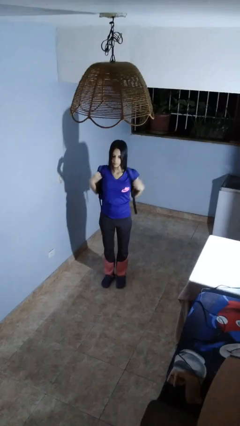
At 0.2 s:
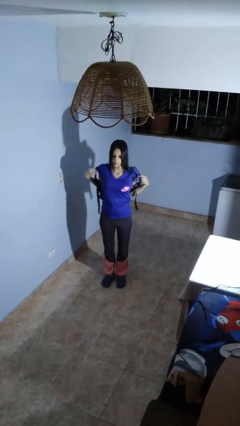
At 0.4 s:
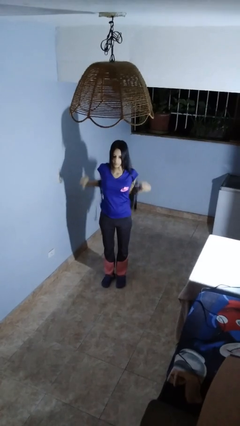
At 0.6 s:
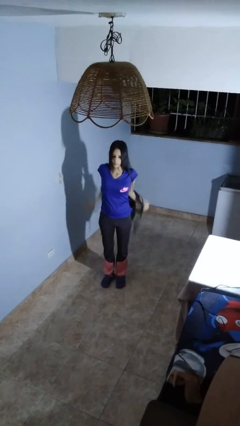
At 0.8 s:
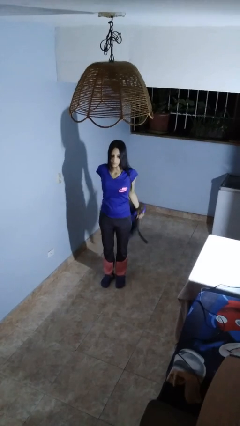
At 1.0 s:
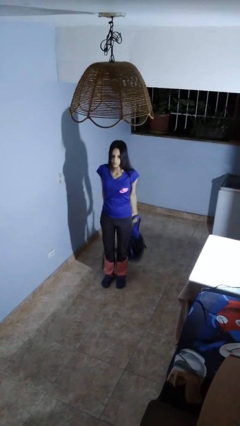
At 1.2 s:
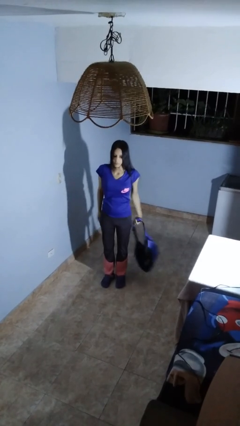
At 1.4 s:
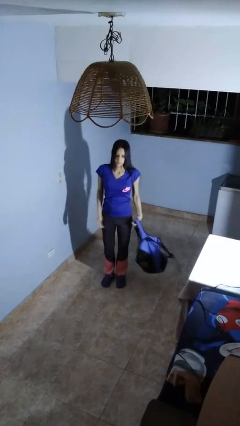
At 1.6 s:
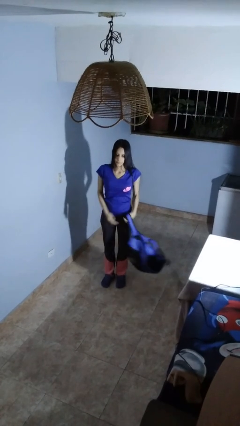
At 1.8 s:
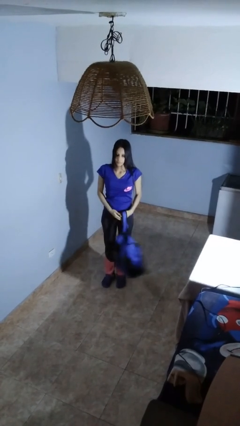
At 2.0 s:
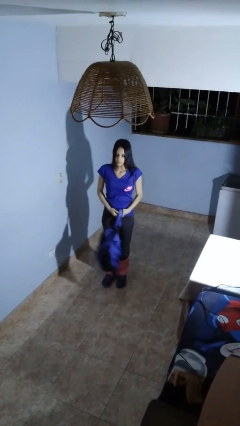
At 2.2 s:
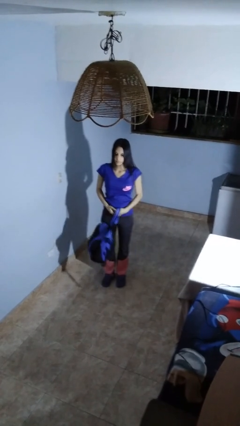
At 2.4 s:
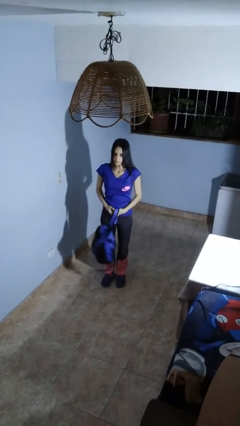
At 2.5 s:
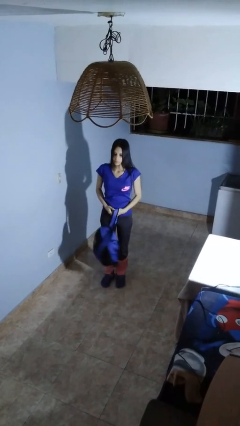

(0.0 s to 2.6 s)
person takes off backpack

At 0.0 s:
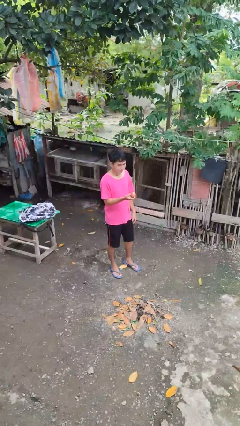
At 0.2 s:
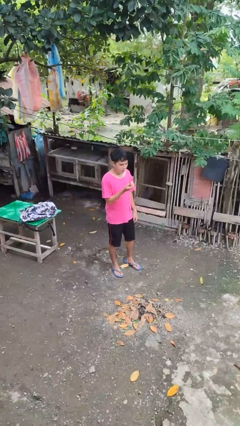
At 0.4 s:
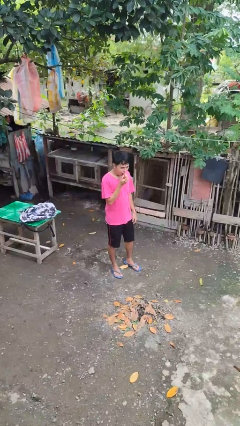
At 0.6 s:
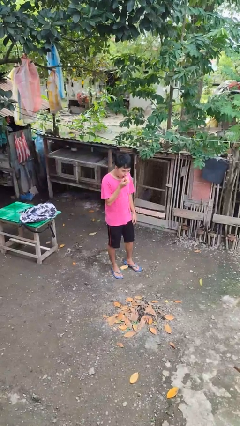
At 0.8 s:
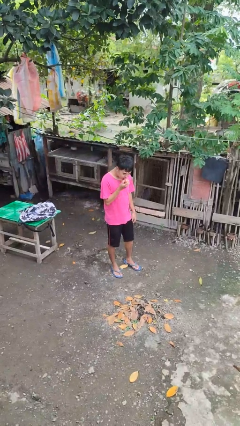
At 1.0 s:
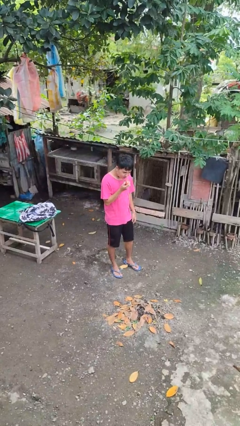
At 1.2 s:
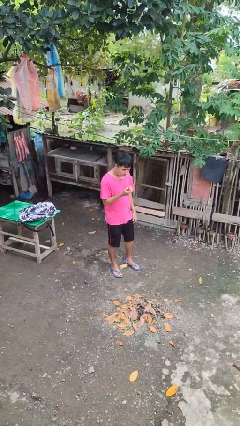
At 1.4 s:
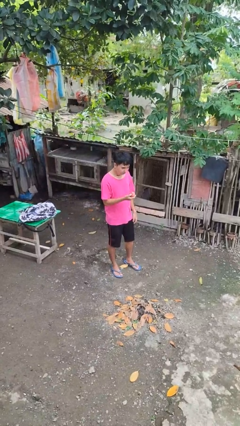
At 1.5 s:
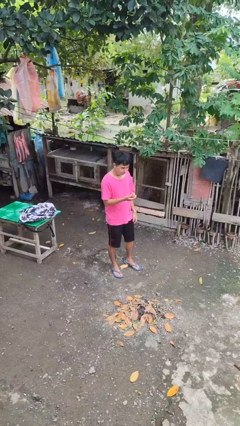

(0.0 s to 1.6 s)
person eats apple

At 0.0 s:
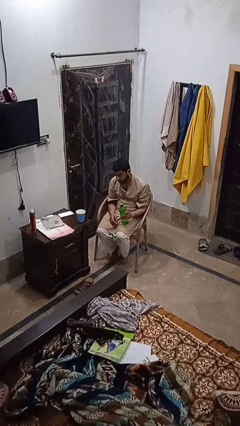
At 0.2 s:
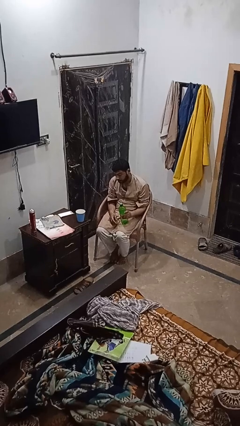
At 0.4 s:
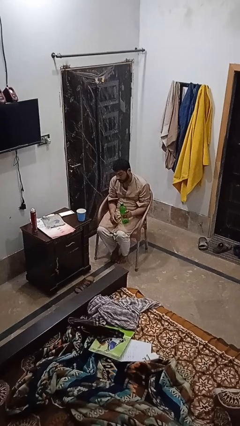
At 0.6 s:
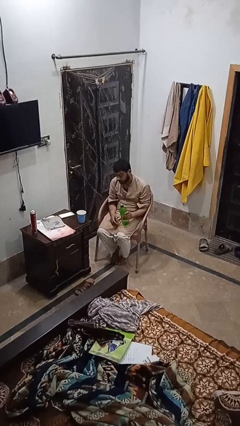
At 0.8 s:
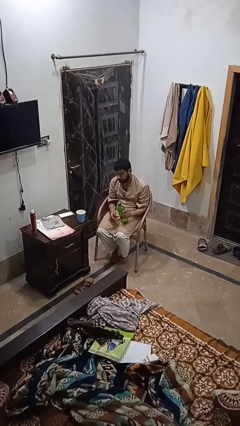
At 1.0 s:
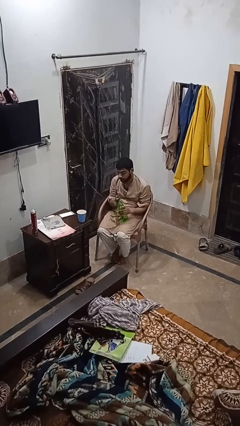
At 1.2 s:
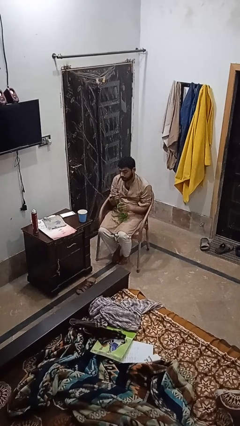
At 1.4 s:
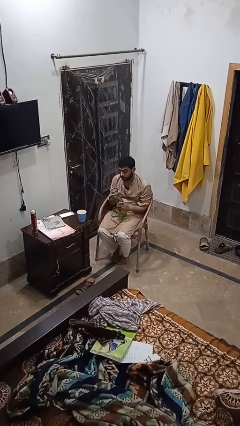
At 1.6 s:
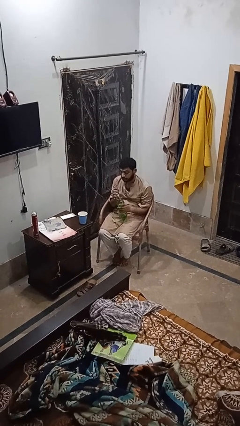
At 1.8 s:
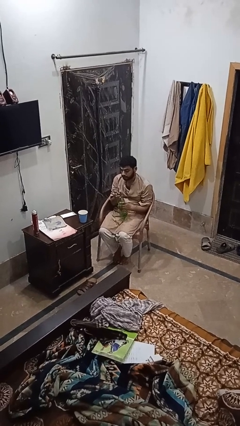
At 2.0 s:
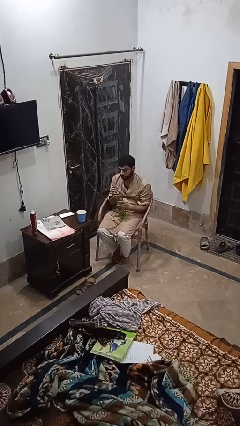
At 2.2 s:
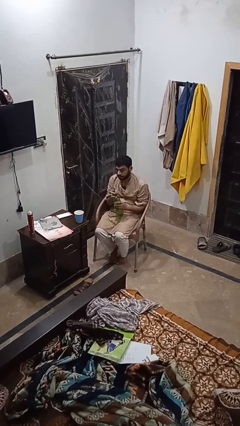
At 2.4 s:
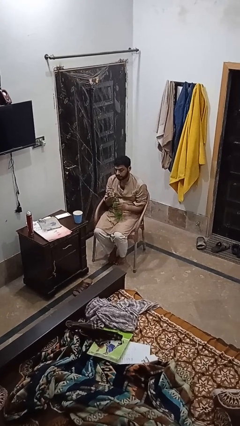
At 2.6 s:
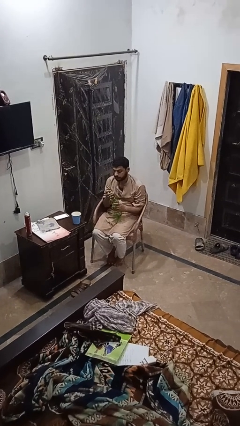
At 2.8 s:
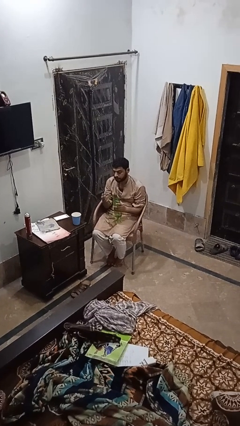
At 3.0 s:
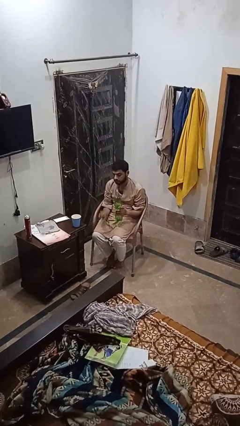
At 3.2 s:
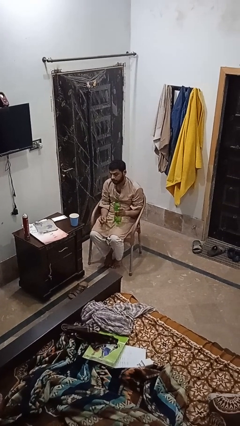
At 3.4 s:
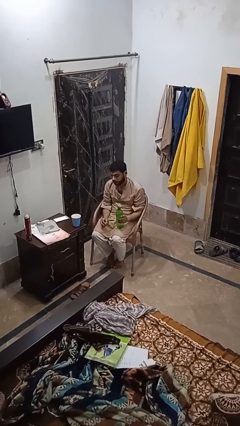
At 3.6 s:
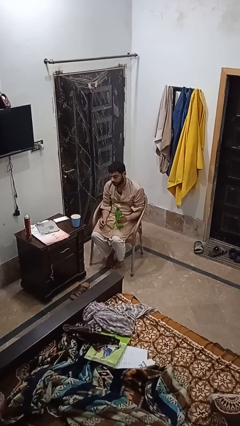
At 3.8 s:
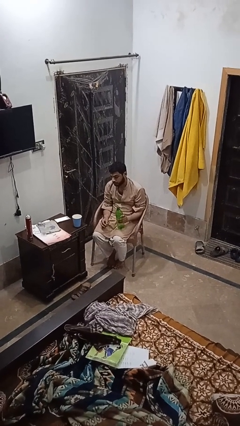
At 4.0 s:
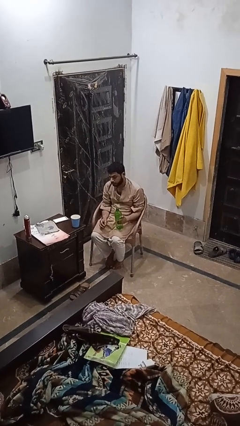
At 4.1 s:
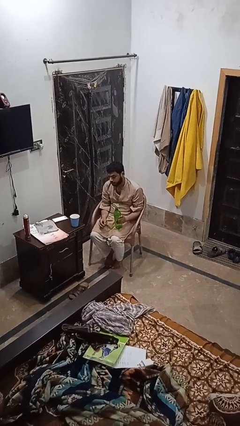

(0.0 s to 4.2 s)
person unscrews lid from bottle

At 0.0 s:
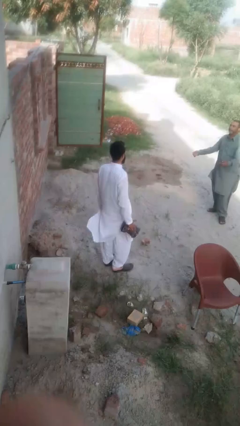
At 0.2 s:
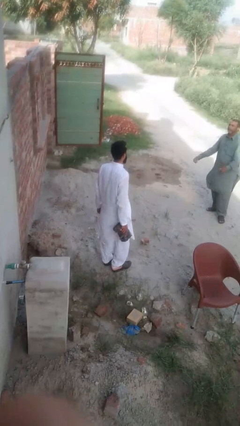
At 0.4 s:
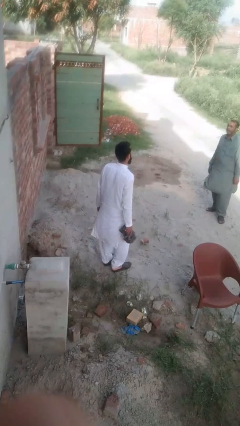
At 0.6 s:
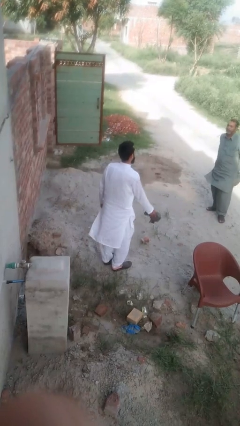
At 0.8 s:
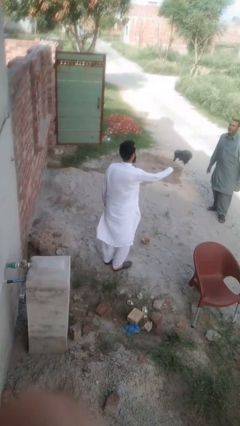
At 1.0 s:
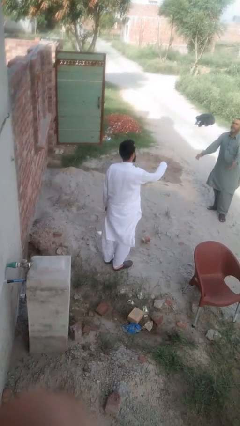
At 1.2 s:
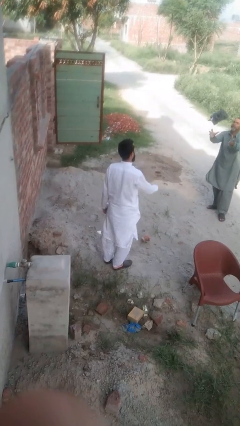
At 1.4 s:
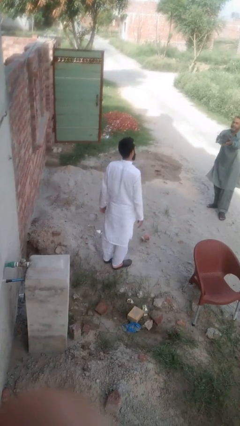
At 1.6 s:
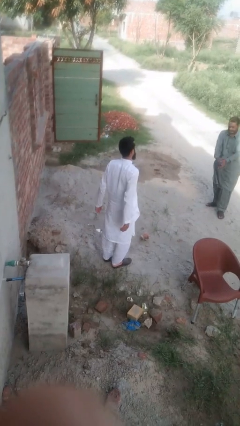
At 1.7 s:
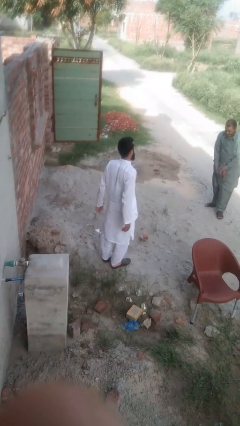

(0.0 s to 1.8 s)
person throws object to person

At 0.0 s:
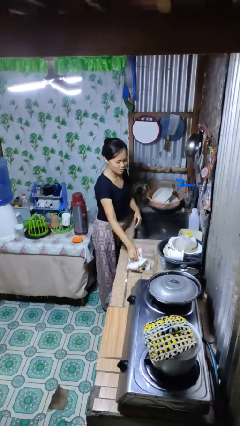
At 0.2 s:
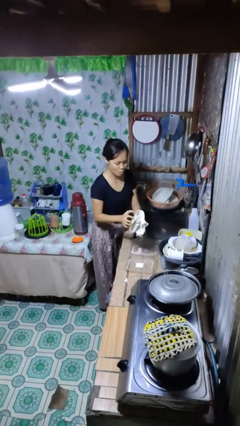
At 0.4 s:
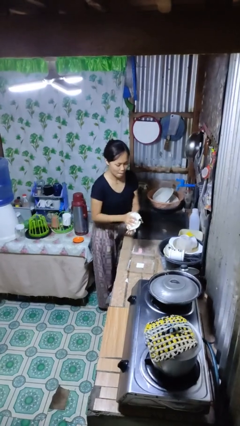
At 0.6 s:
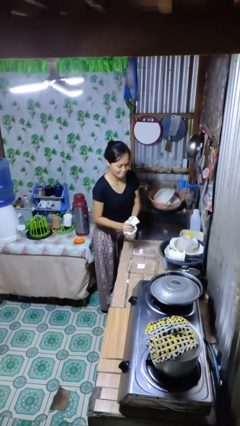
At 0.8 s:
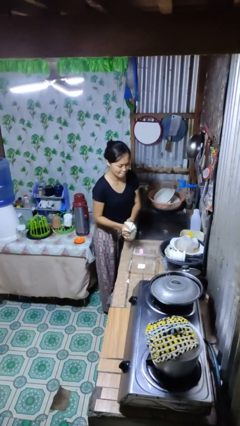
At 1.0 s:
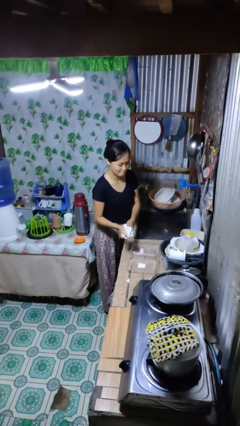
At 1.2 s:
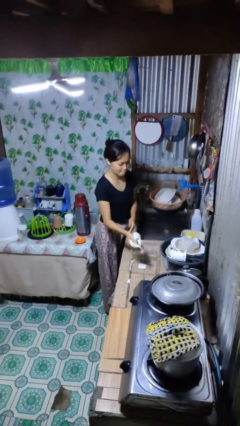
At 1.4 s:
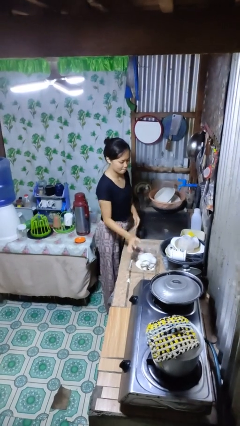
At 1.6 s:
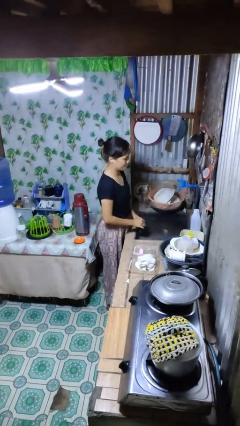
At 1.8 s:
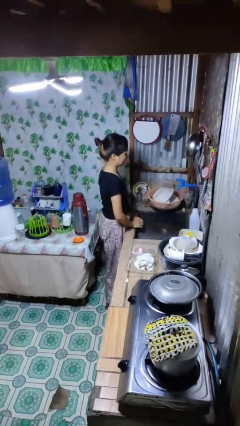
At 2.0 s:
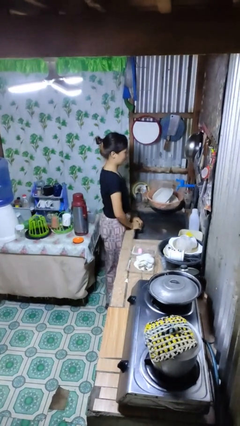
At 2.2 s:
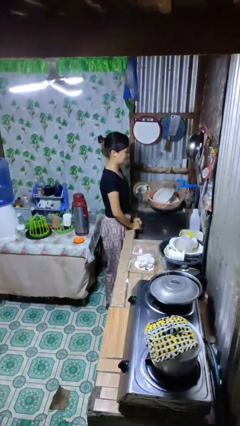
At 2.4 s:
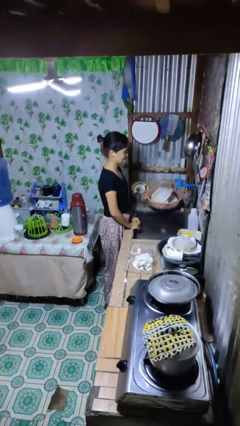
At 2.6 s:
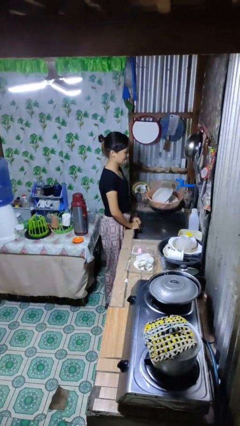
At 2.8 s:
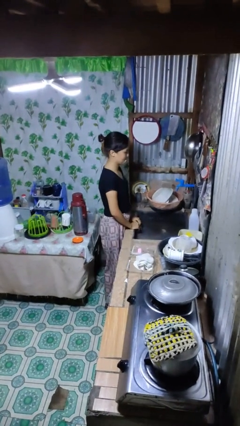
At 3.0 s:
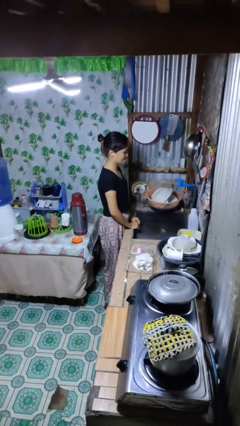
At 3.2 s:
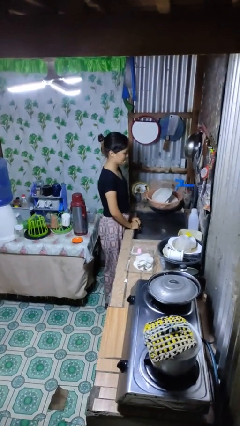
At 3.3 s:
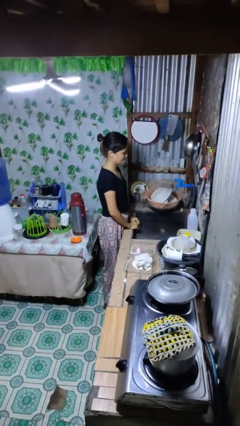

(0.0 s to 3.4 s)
person dries hands with towel

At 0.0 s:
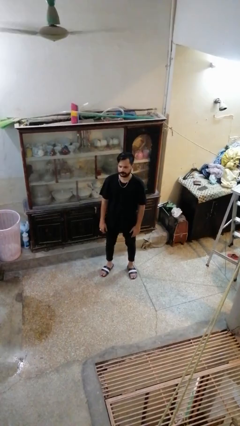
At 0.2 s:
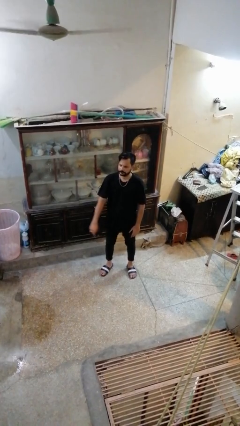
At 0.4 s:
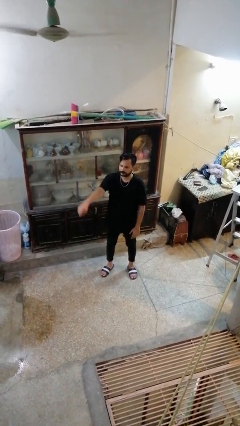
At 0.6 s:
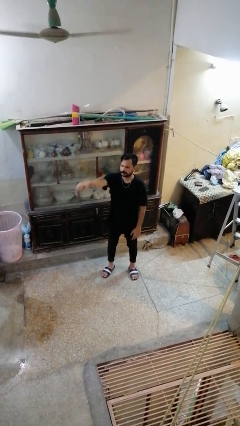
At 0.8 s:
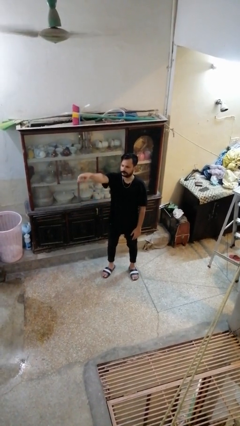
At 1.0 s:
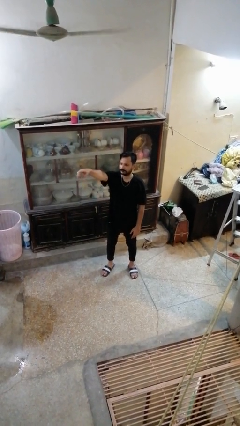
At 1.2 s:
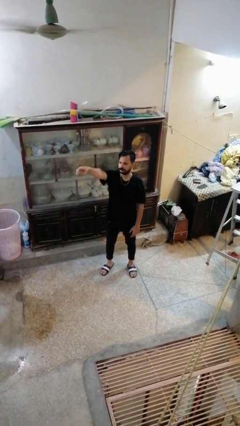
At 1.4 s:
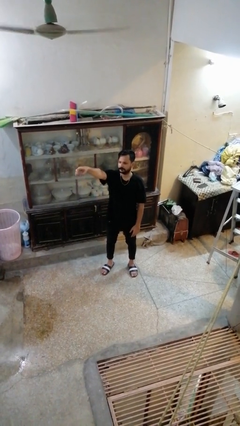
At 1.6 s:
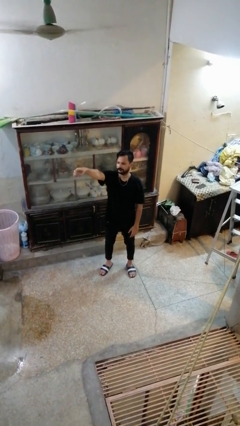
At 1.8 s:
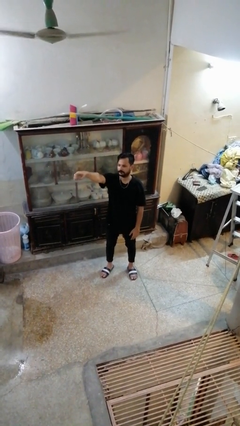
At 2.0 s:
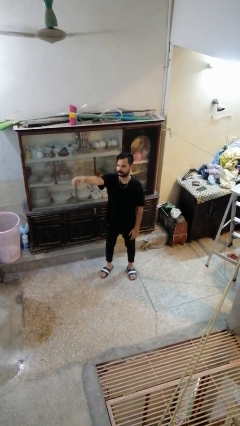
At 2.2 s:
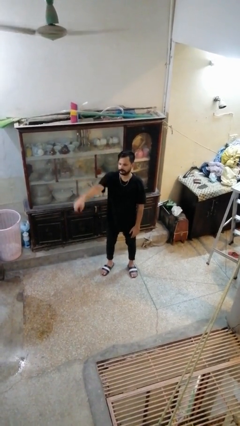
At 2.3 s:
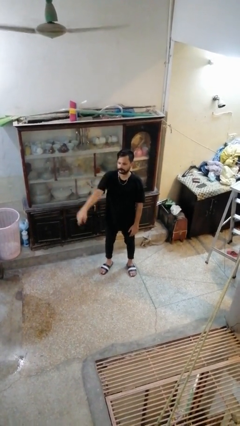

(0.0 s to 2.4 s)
person points at person

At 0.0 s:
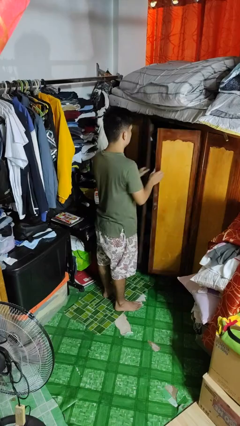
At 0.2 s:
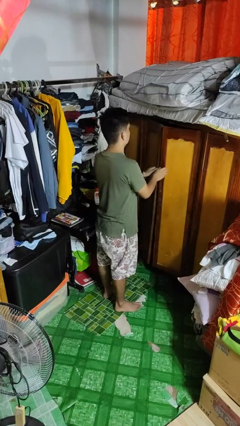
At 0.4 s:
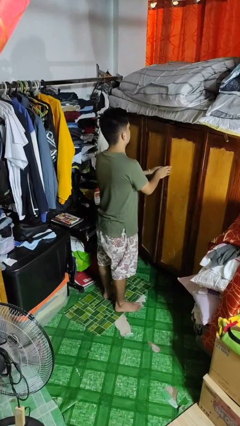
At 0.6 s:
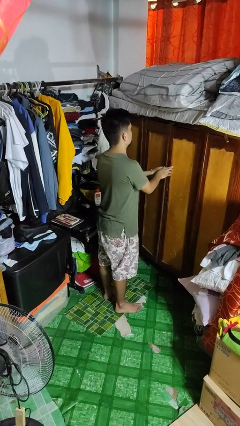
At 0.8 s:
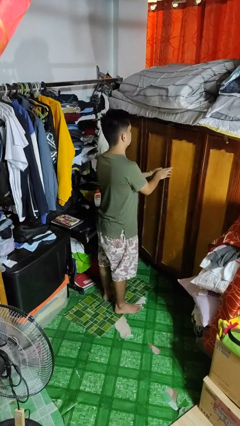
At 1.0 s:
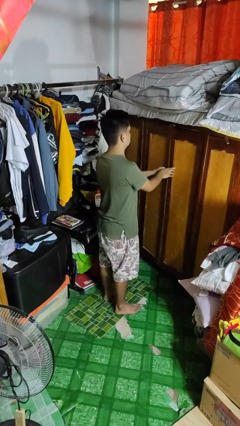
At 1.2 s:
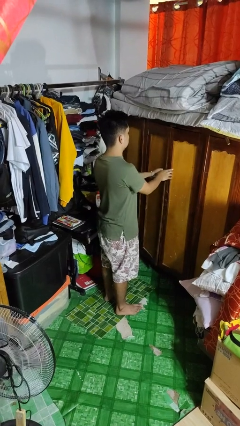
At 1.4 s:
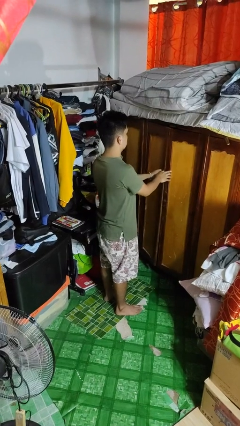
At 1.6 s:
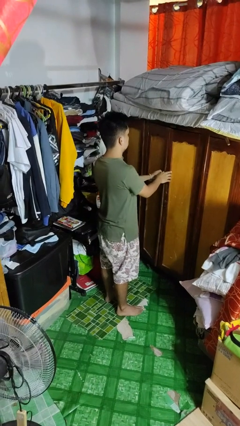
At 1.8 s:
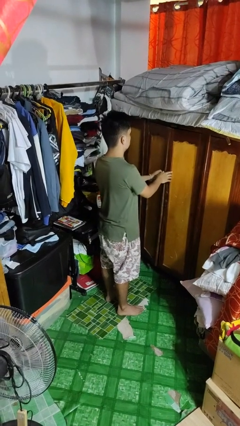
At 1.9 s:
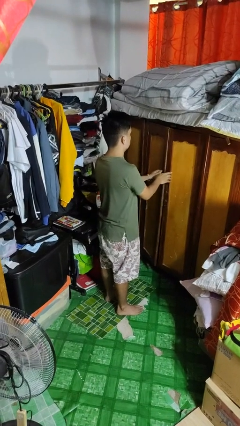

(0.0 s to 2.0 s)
person closes closet door
